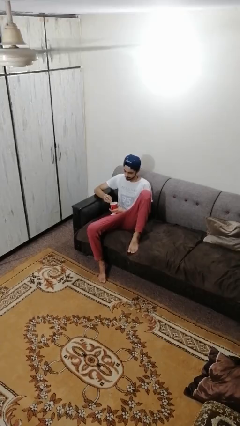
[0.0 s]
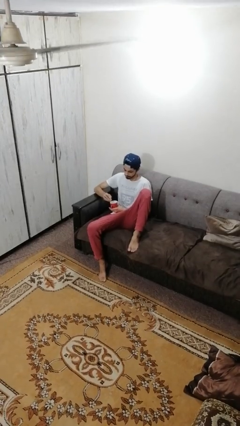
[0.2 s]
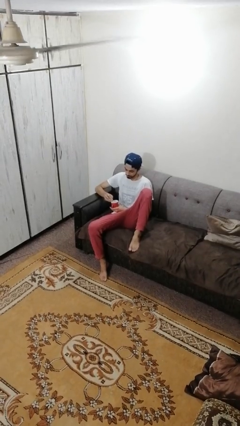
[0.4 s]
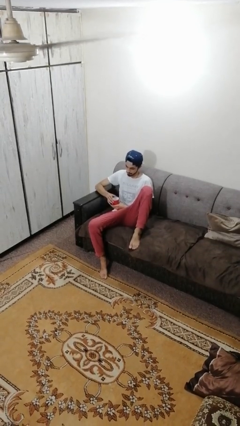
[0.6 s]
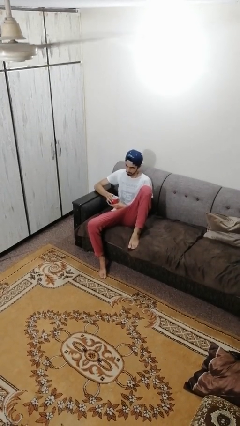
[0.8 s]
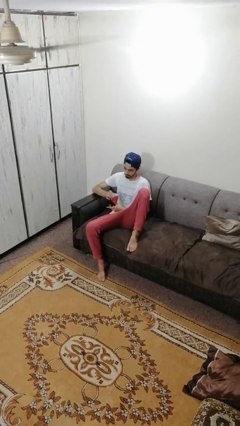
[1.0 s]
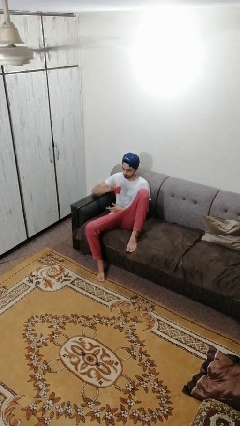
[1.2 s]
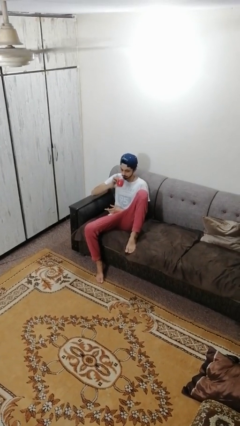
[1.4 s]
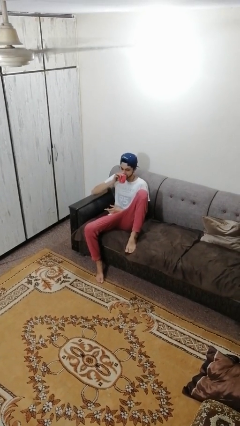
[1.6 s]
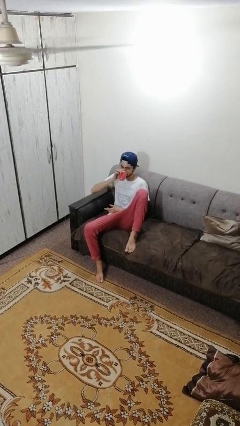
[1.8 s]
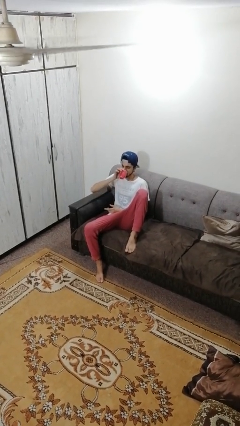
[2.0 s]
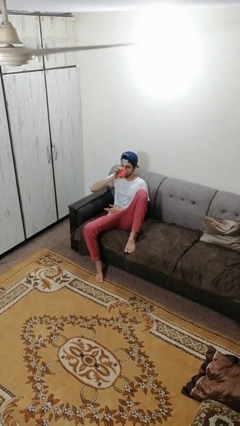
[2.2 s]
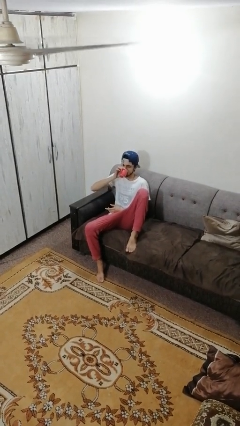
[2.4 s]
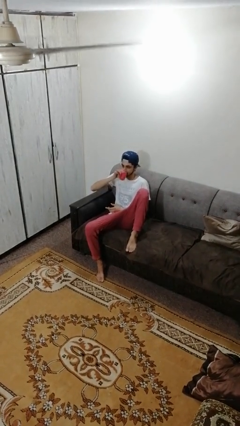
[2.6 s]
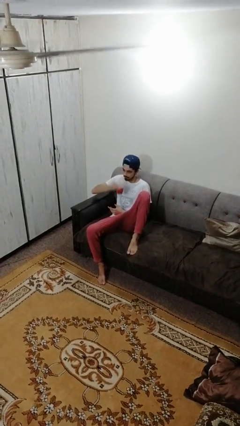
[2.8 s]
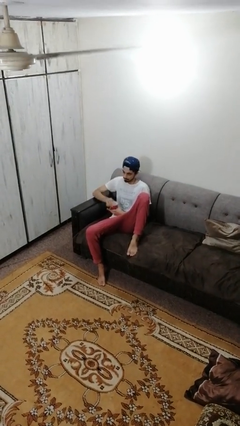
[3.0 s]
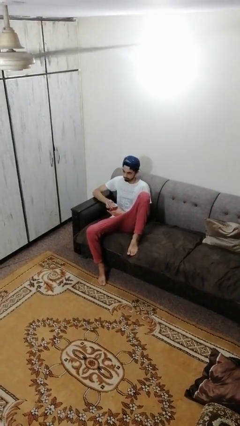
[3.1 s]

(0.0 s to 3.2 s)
person drinks from mug

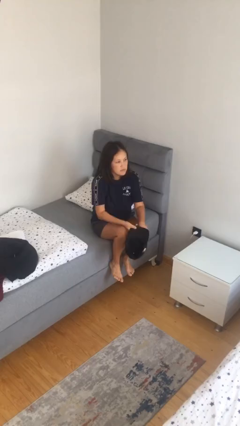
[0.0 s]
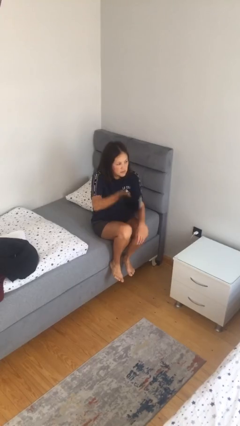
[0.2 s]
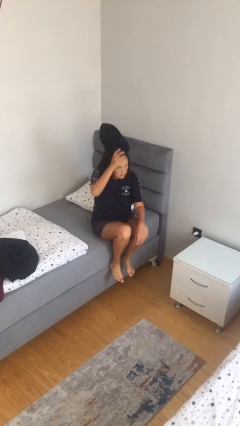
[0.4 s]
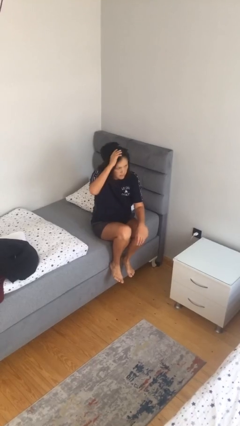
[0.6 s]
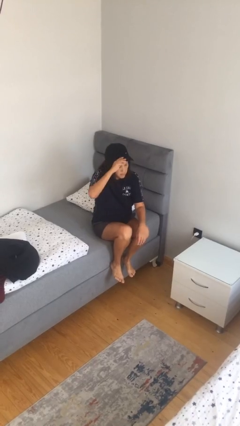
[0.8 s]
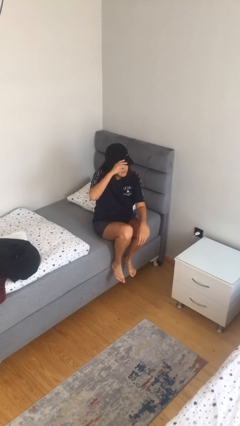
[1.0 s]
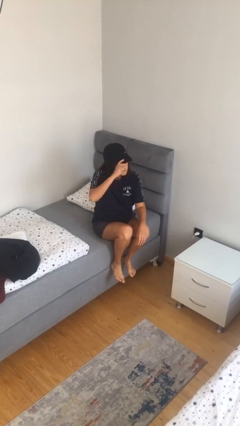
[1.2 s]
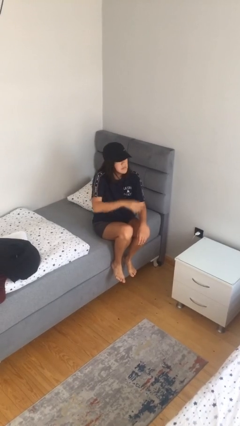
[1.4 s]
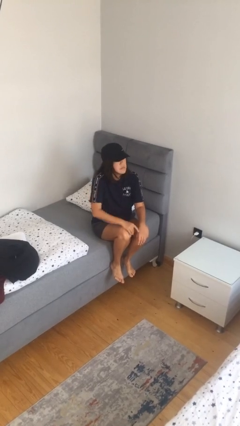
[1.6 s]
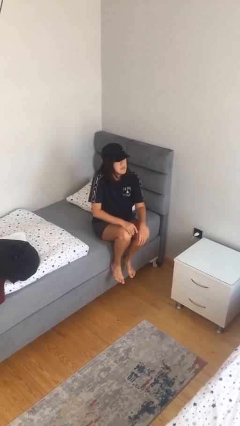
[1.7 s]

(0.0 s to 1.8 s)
person puts on hat

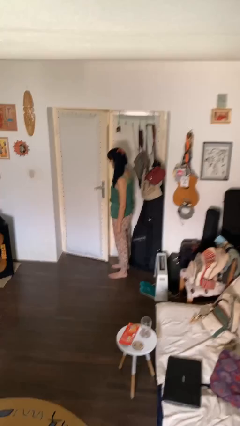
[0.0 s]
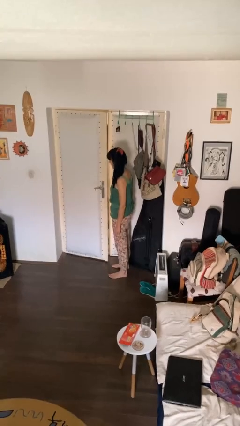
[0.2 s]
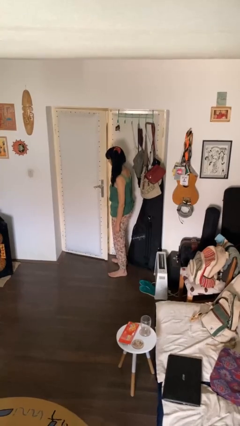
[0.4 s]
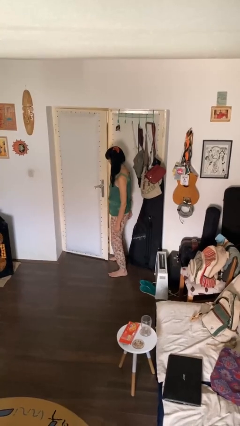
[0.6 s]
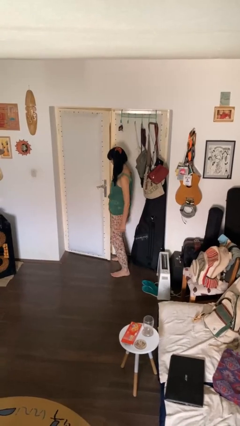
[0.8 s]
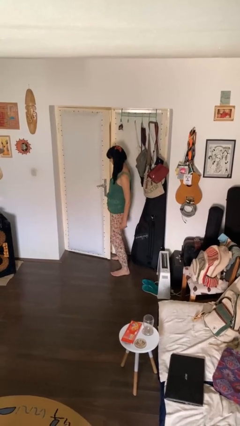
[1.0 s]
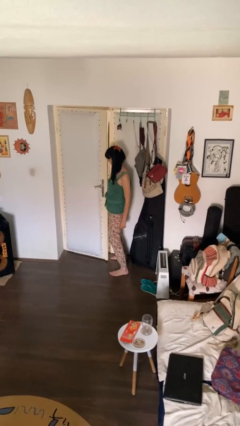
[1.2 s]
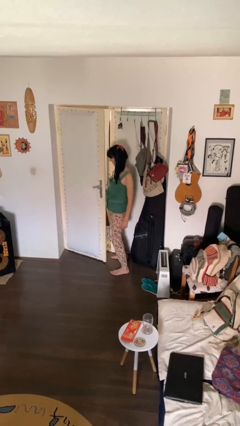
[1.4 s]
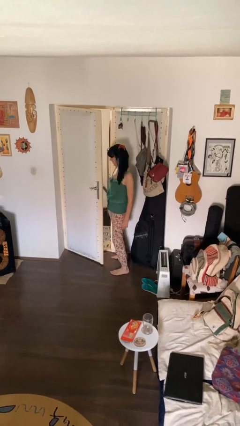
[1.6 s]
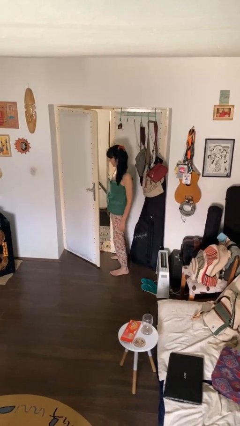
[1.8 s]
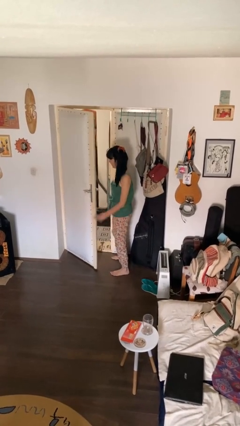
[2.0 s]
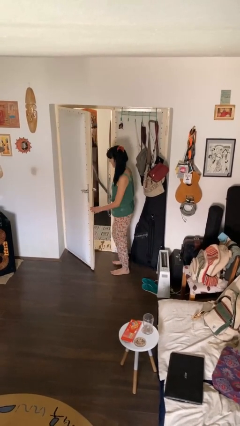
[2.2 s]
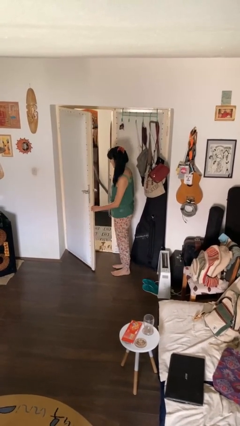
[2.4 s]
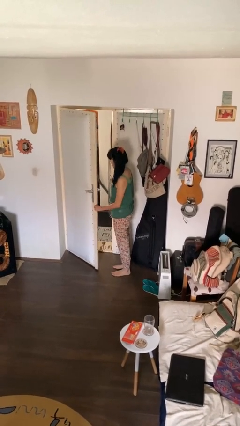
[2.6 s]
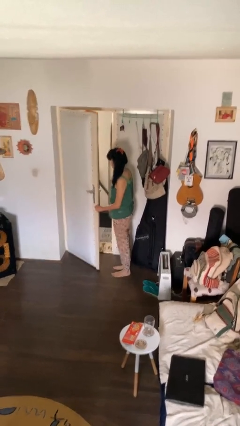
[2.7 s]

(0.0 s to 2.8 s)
person opens facility door

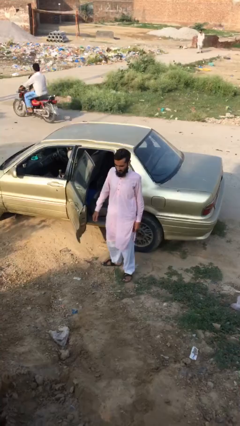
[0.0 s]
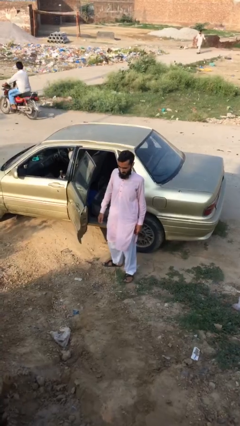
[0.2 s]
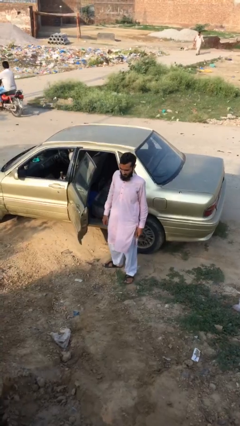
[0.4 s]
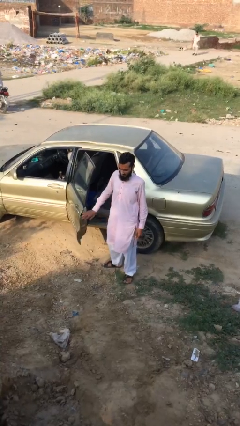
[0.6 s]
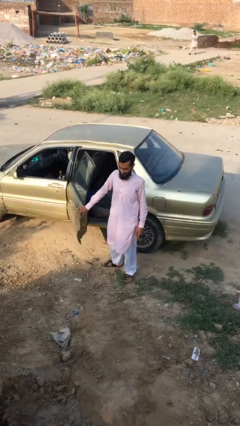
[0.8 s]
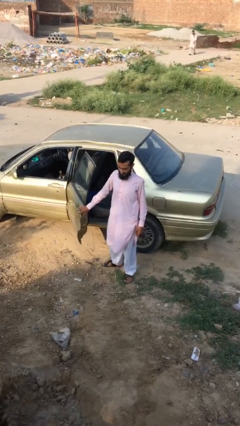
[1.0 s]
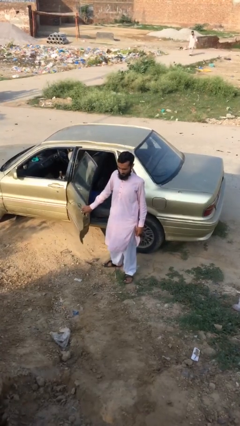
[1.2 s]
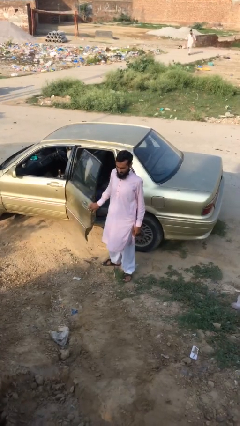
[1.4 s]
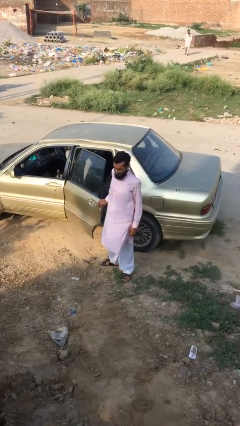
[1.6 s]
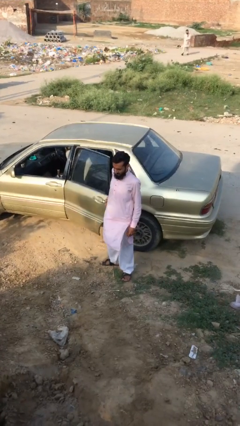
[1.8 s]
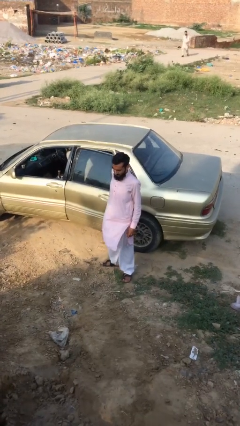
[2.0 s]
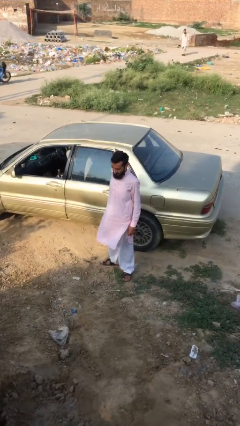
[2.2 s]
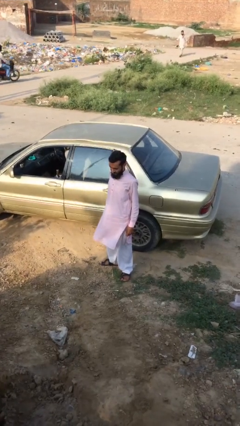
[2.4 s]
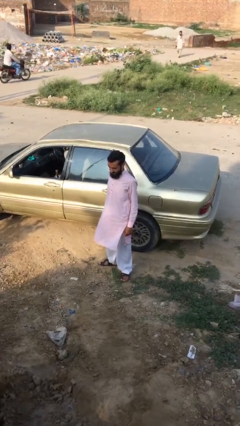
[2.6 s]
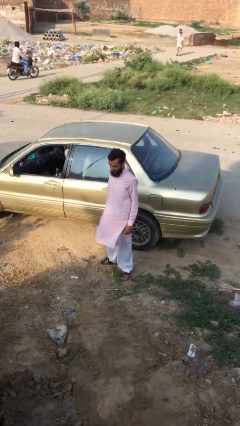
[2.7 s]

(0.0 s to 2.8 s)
person closes car door

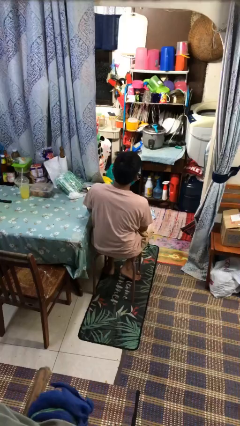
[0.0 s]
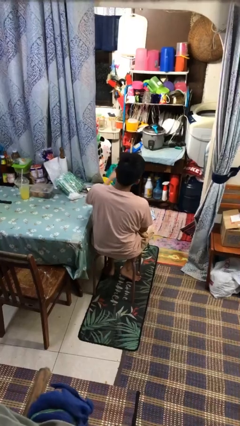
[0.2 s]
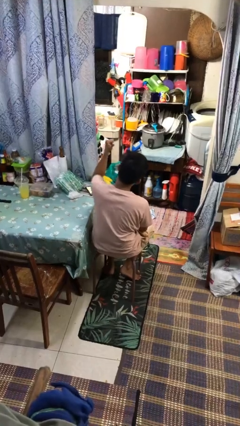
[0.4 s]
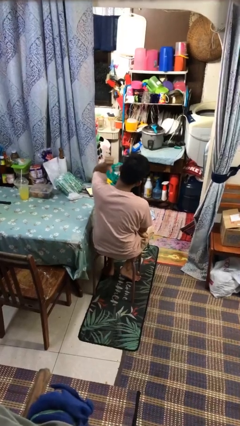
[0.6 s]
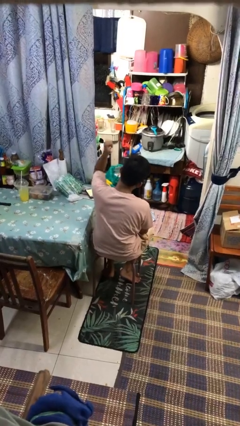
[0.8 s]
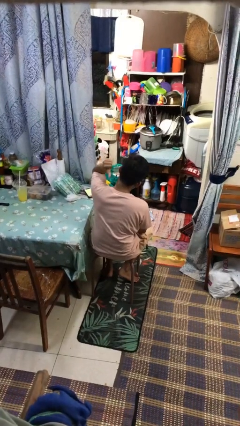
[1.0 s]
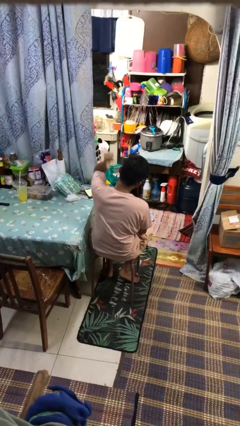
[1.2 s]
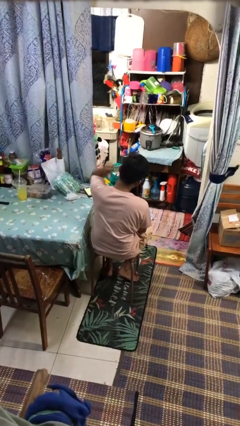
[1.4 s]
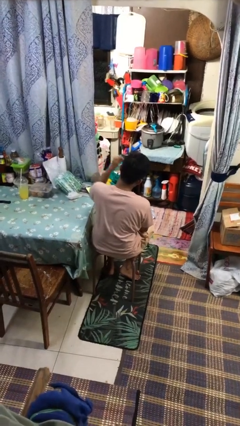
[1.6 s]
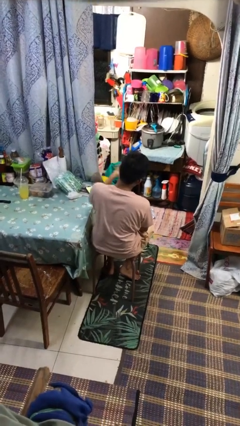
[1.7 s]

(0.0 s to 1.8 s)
person gestures behind me

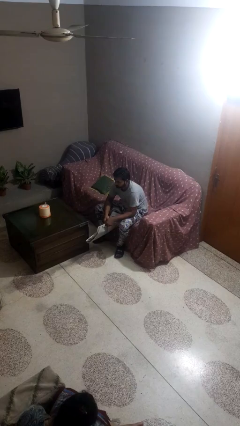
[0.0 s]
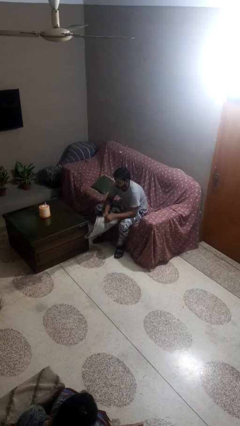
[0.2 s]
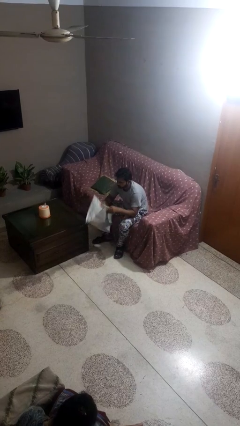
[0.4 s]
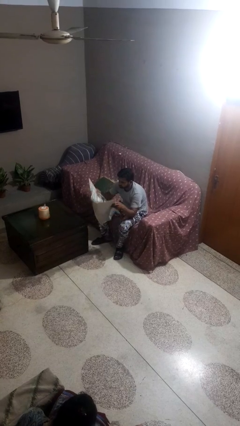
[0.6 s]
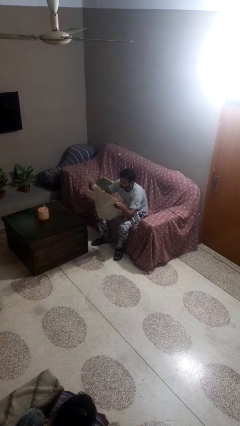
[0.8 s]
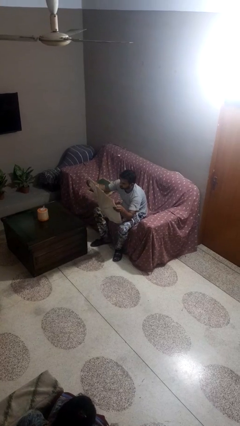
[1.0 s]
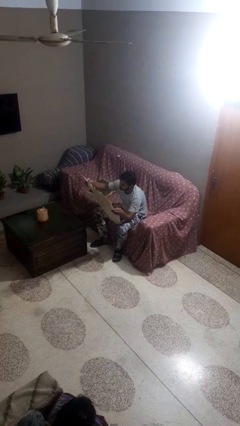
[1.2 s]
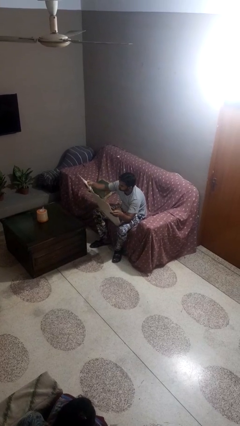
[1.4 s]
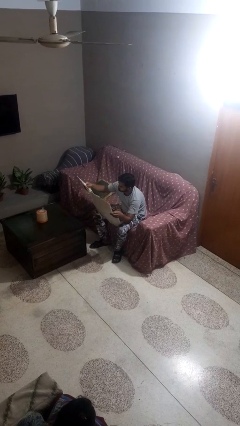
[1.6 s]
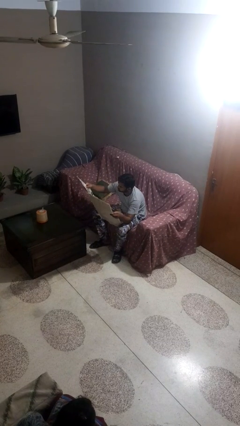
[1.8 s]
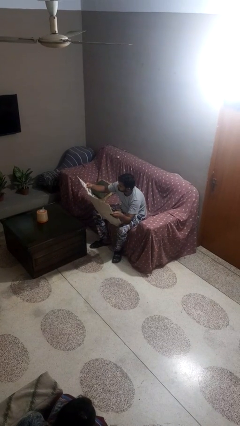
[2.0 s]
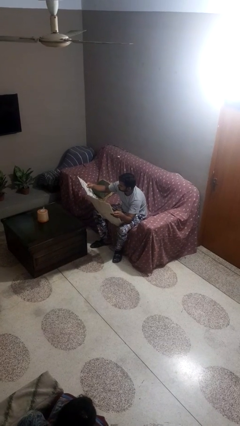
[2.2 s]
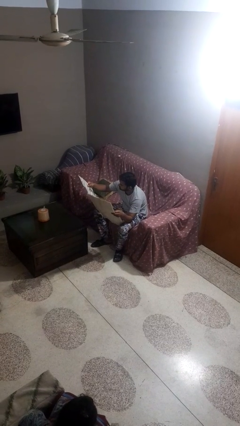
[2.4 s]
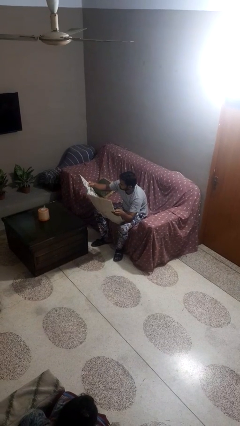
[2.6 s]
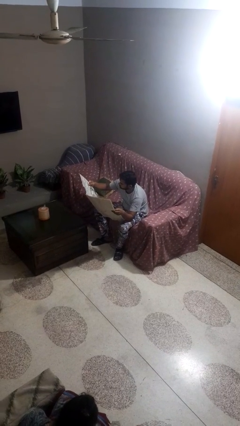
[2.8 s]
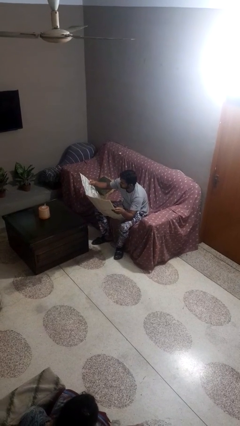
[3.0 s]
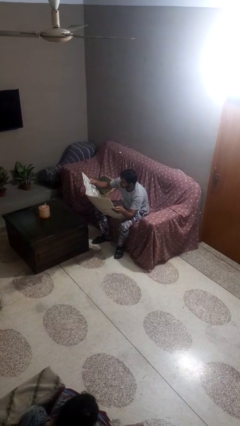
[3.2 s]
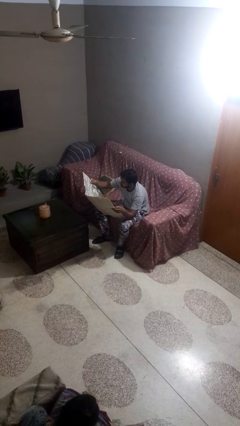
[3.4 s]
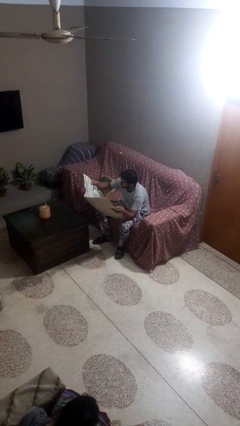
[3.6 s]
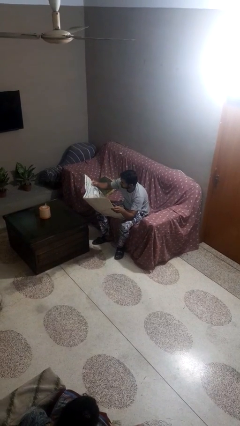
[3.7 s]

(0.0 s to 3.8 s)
person reads newspaper

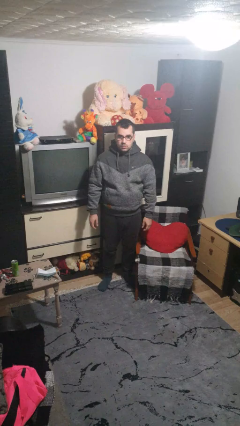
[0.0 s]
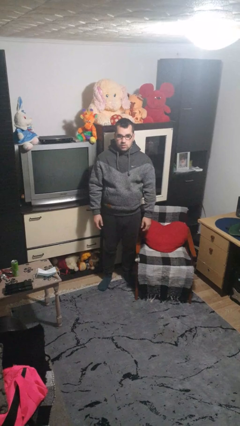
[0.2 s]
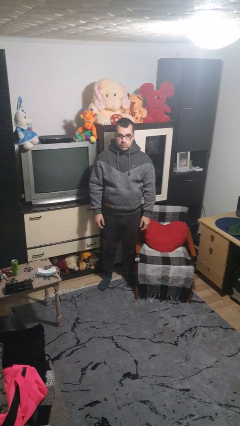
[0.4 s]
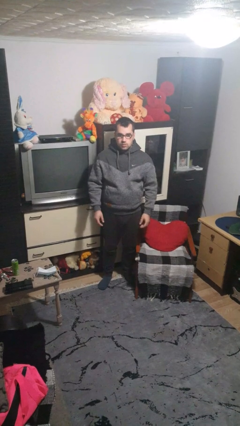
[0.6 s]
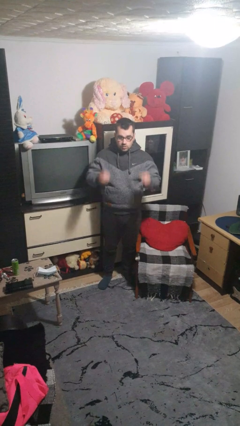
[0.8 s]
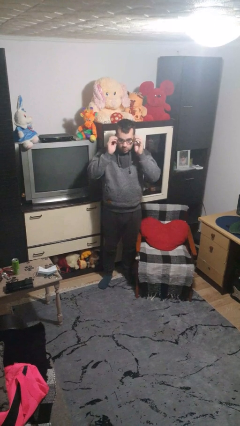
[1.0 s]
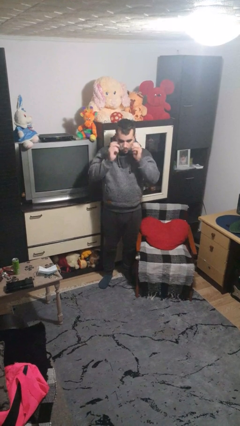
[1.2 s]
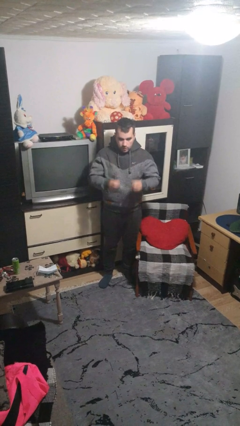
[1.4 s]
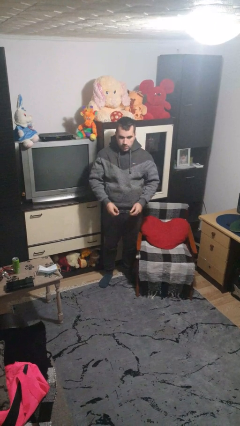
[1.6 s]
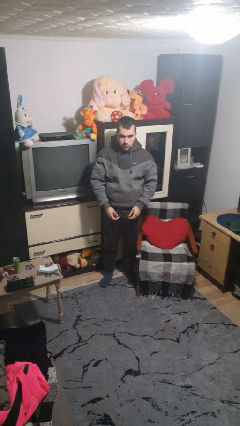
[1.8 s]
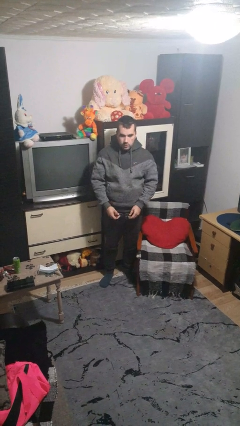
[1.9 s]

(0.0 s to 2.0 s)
person takes off glasses
